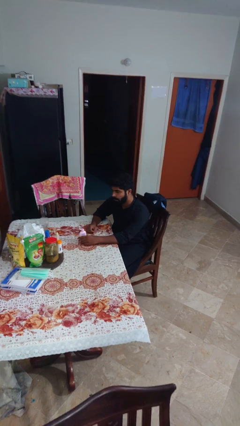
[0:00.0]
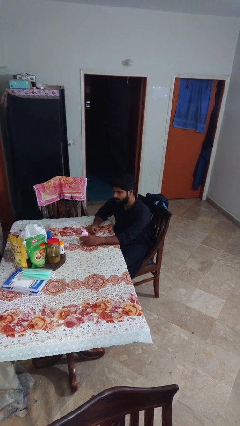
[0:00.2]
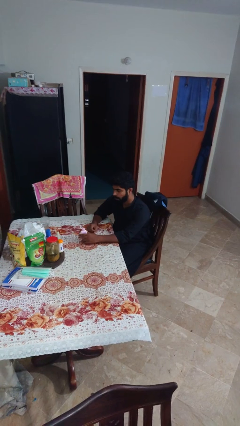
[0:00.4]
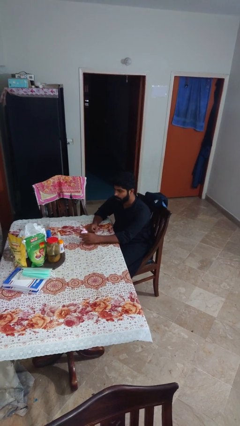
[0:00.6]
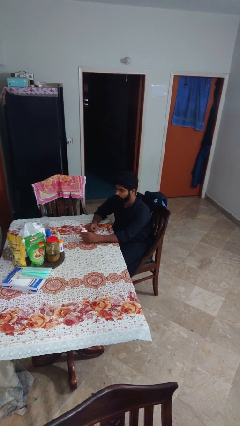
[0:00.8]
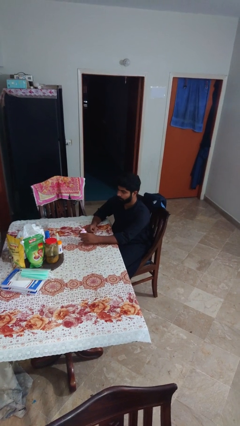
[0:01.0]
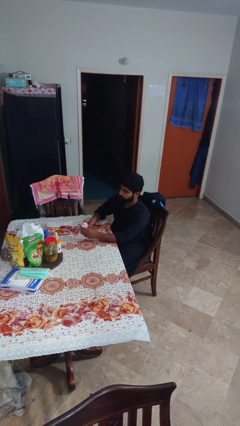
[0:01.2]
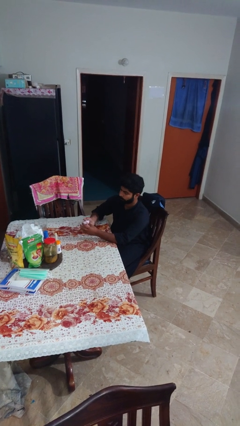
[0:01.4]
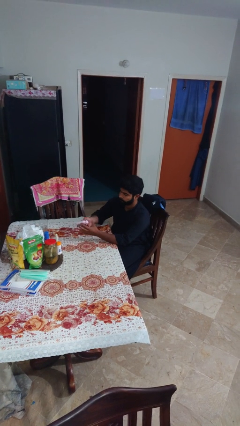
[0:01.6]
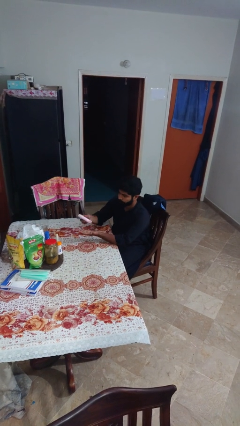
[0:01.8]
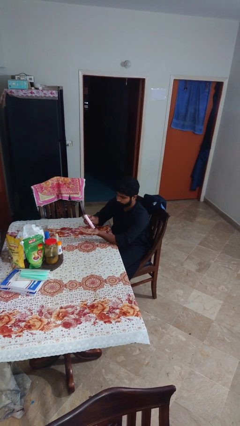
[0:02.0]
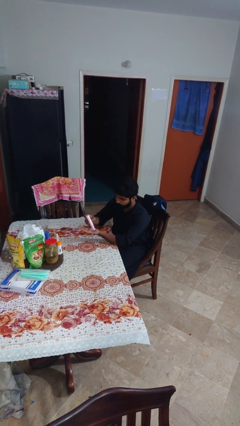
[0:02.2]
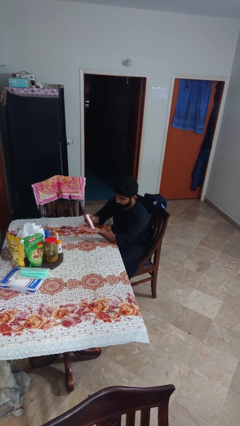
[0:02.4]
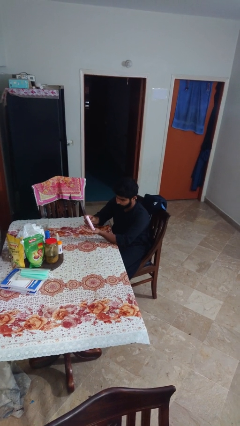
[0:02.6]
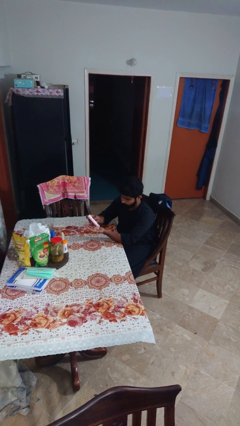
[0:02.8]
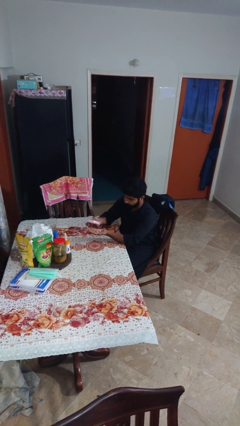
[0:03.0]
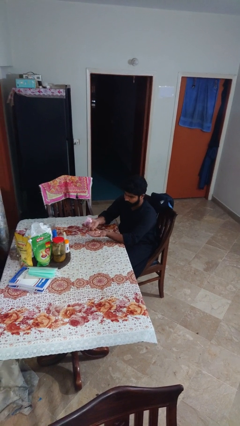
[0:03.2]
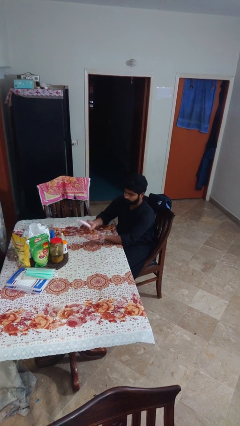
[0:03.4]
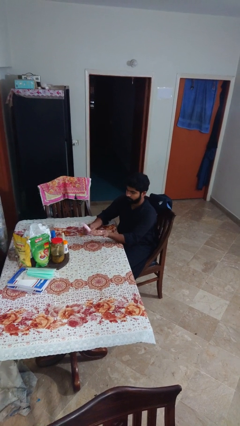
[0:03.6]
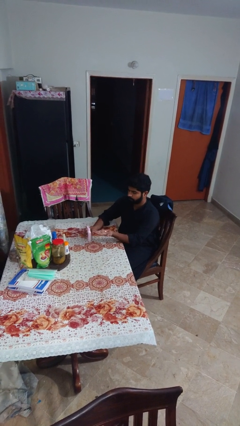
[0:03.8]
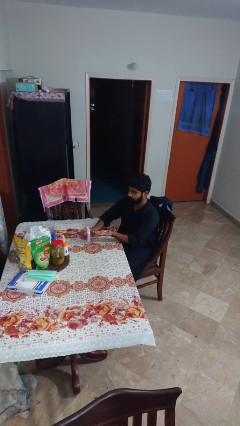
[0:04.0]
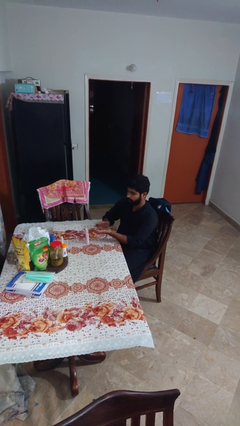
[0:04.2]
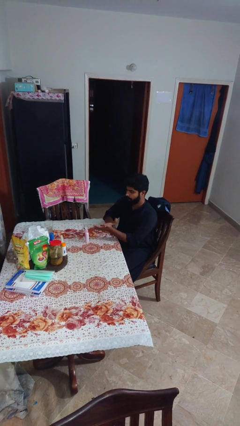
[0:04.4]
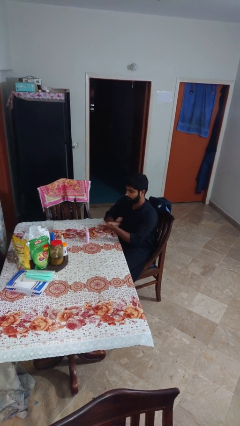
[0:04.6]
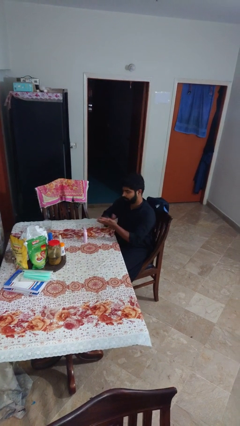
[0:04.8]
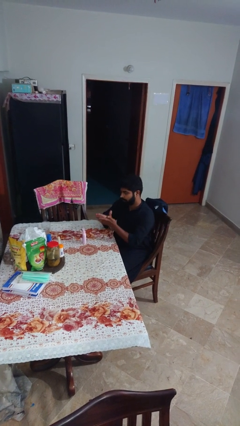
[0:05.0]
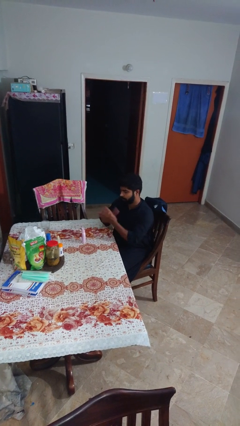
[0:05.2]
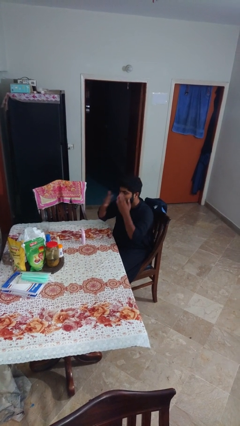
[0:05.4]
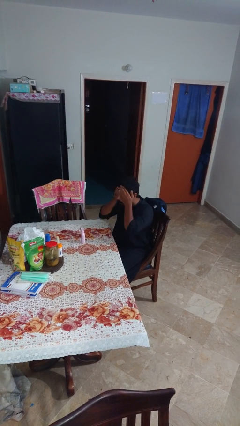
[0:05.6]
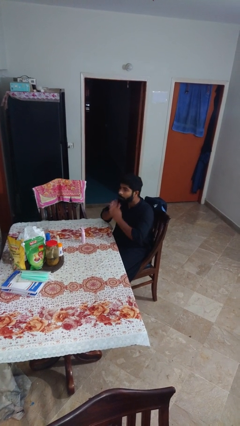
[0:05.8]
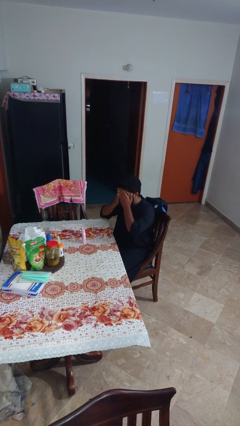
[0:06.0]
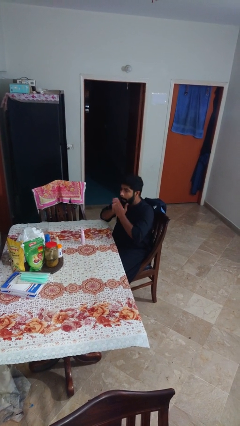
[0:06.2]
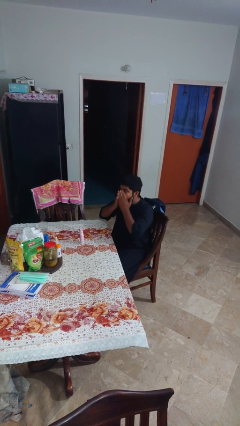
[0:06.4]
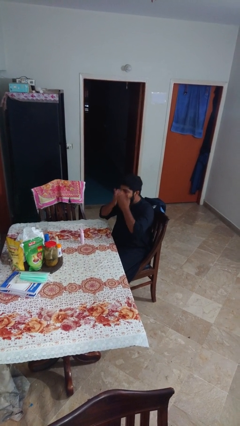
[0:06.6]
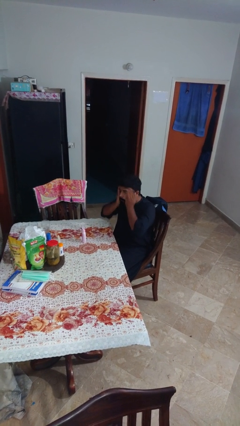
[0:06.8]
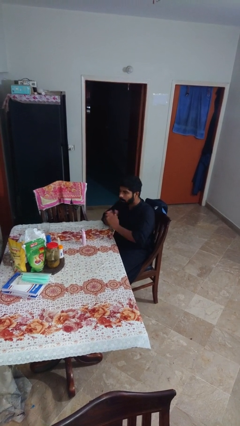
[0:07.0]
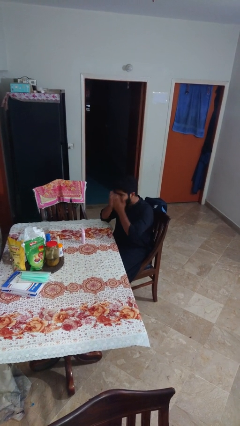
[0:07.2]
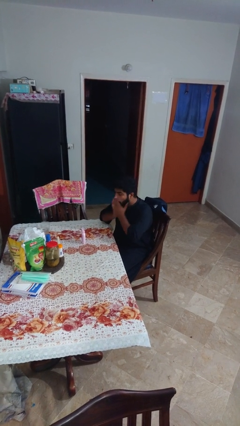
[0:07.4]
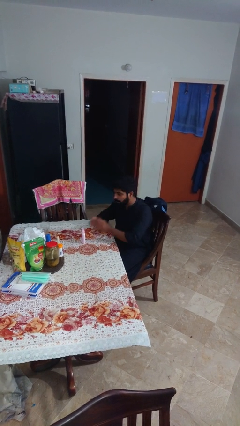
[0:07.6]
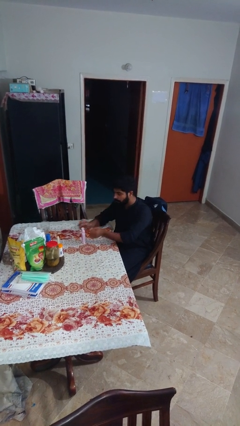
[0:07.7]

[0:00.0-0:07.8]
person applies facial moisturizer

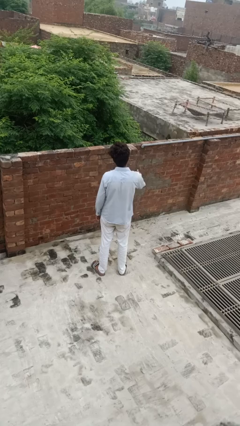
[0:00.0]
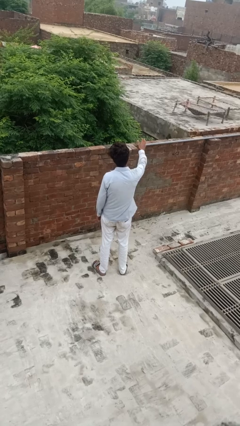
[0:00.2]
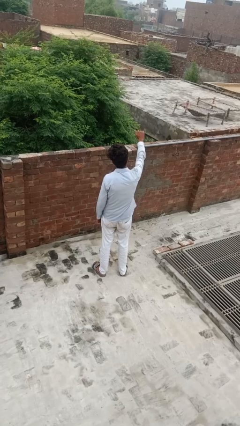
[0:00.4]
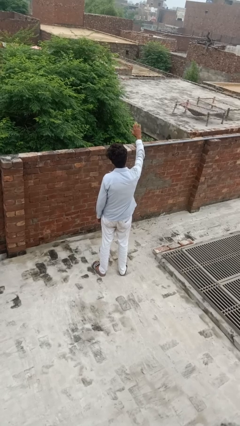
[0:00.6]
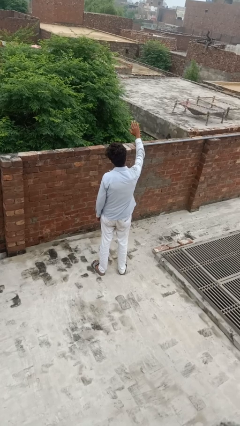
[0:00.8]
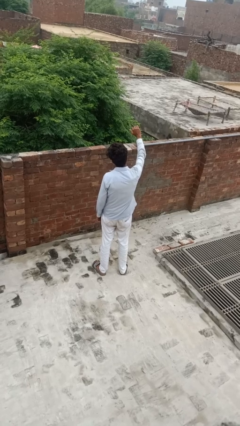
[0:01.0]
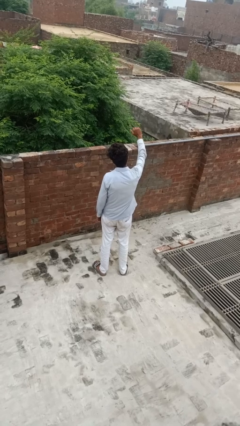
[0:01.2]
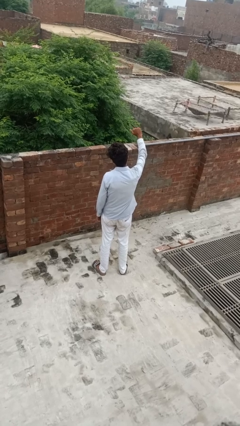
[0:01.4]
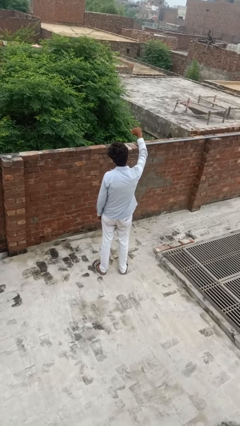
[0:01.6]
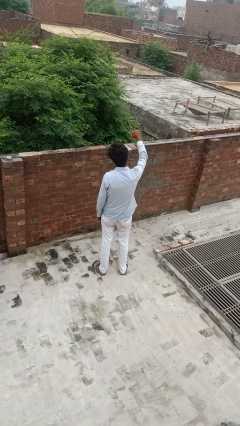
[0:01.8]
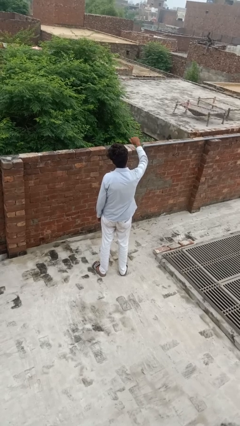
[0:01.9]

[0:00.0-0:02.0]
person gestures come here

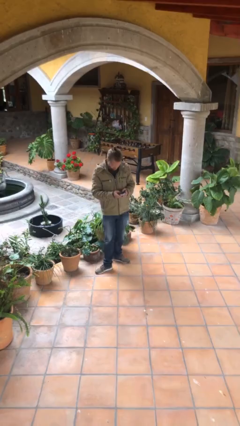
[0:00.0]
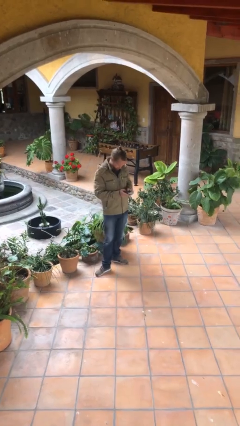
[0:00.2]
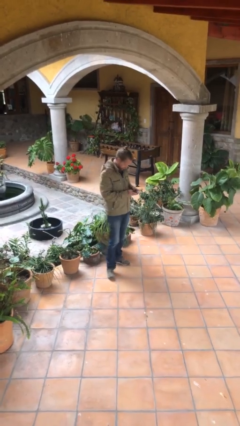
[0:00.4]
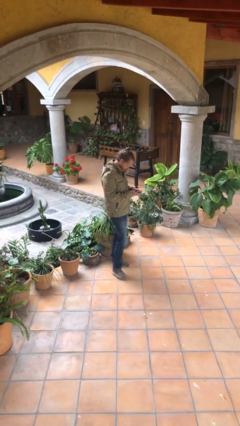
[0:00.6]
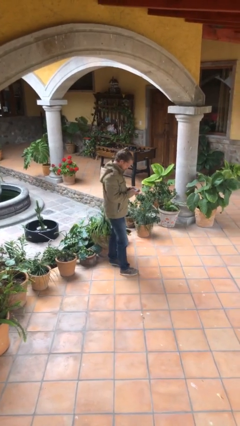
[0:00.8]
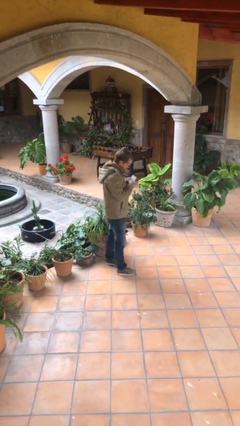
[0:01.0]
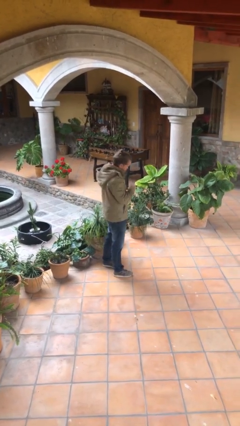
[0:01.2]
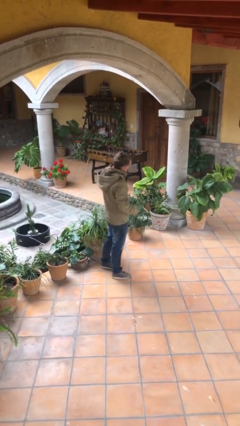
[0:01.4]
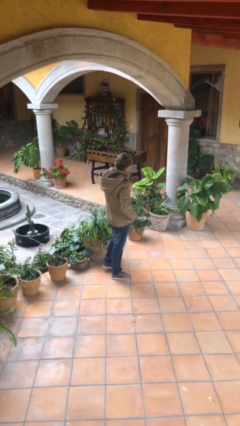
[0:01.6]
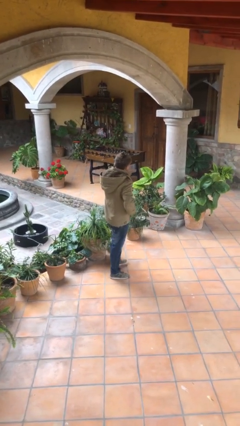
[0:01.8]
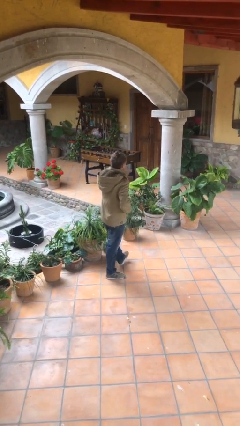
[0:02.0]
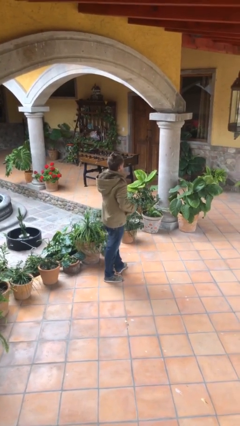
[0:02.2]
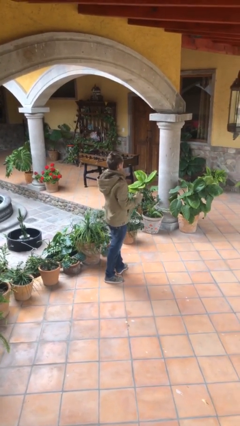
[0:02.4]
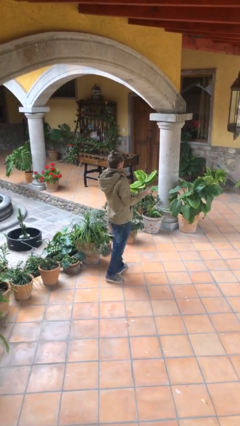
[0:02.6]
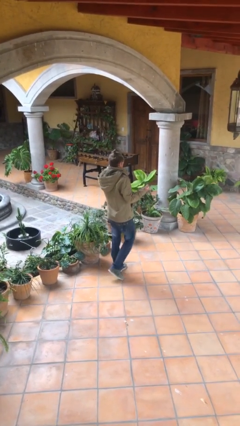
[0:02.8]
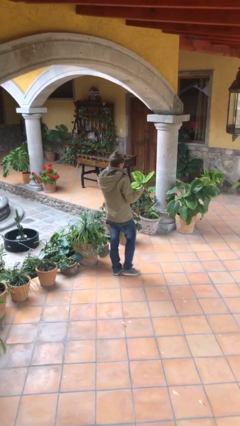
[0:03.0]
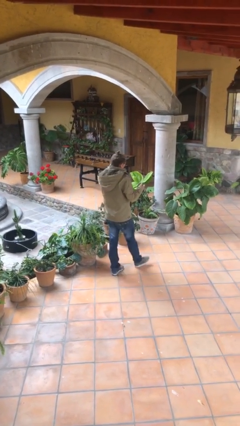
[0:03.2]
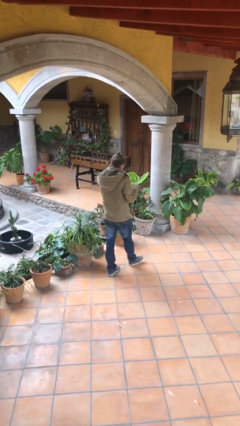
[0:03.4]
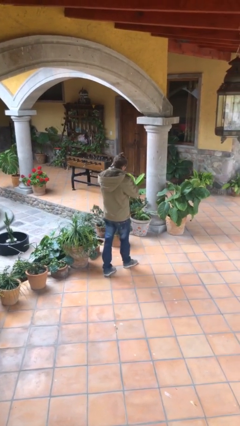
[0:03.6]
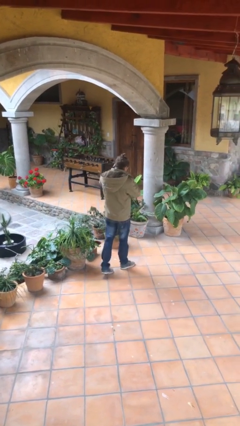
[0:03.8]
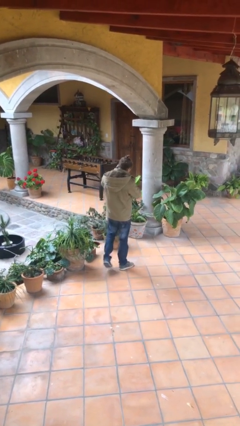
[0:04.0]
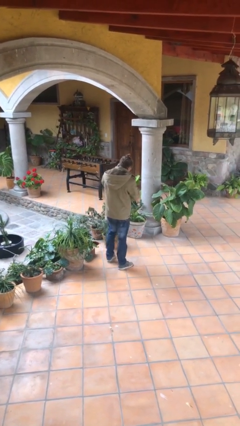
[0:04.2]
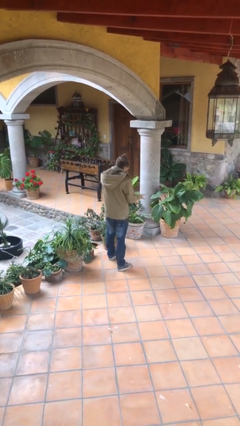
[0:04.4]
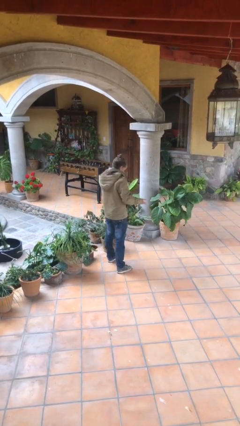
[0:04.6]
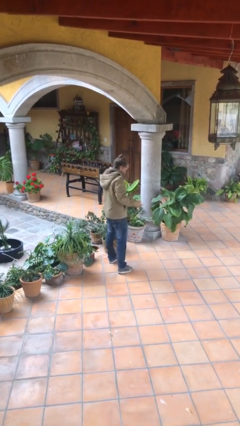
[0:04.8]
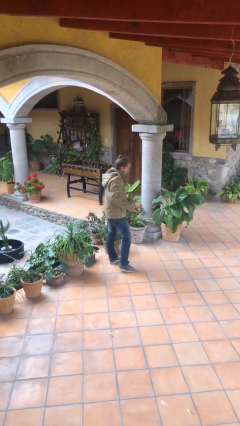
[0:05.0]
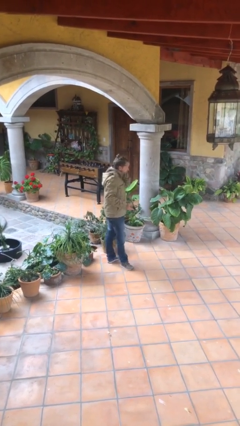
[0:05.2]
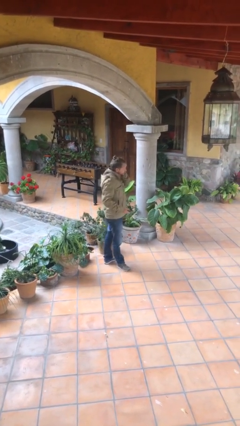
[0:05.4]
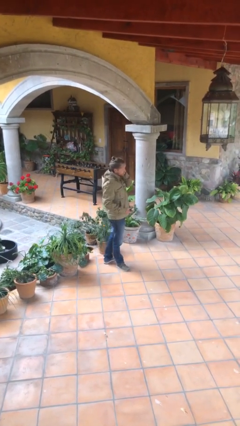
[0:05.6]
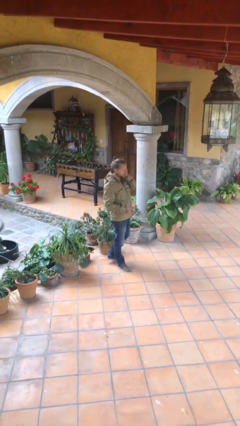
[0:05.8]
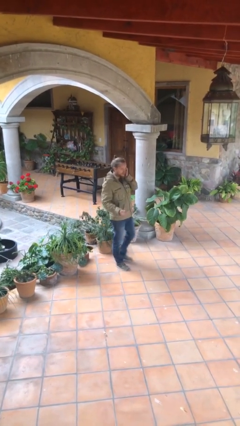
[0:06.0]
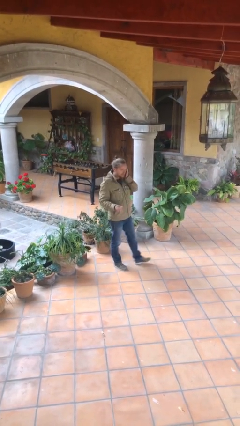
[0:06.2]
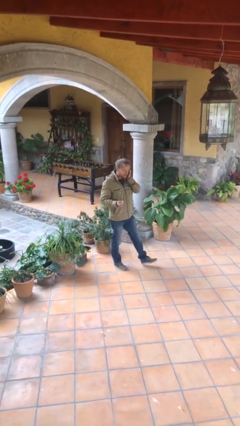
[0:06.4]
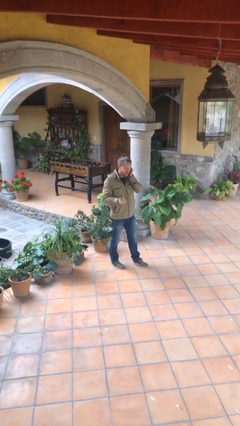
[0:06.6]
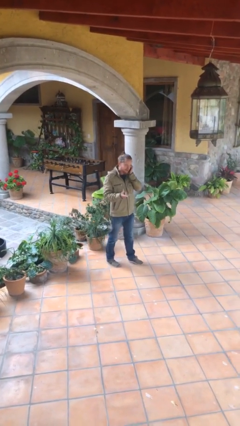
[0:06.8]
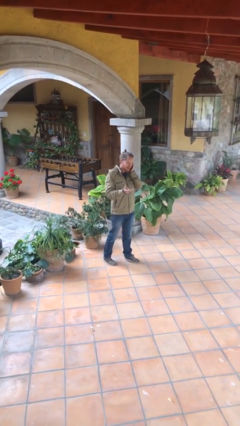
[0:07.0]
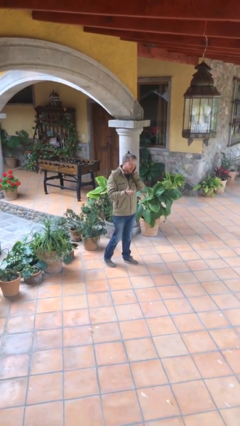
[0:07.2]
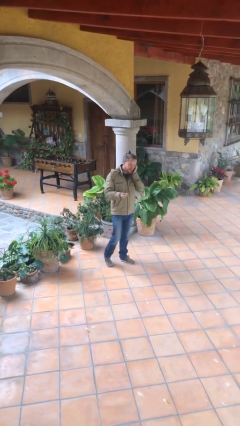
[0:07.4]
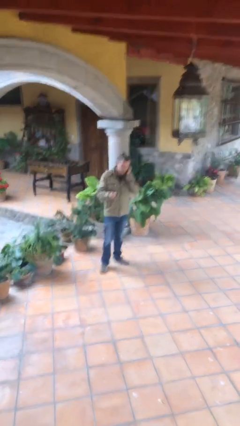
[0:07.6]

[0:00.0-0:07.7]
person talks on phone
